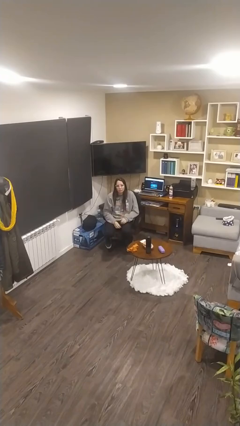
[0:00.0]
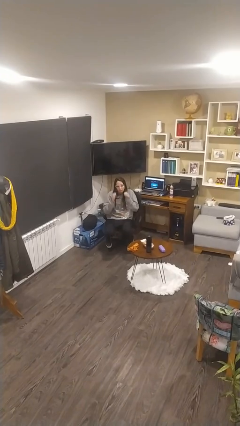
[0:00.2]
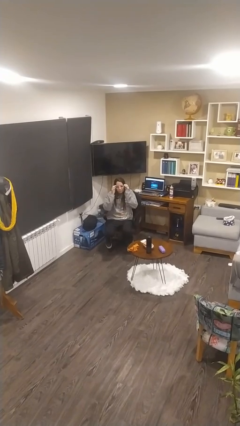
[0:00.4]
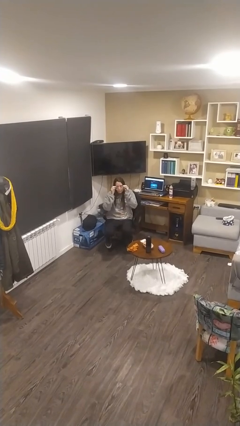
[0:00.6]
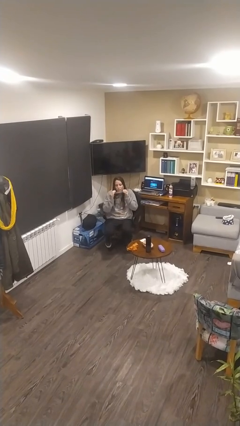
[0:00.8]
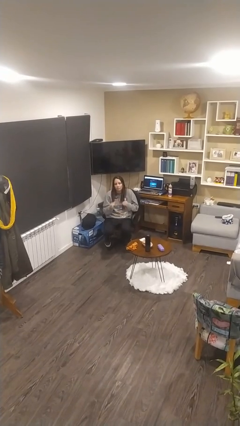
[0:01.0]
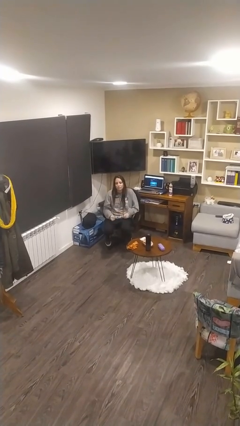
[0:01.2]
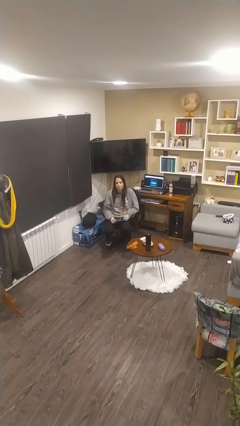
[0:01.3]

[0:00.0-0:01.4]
person takes off glasses

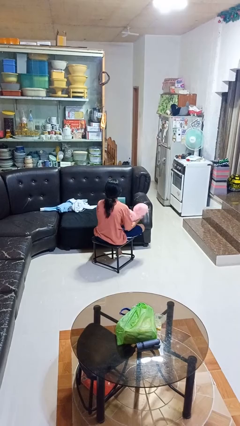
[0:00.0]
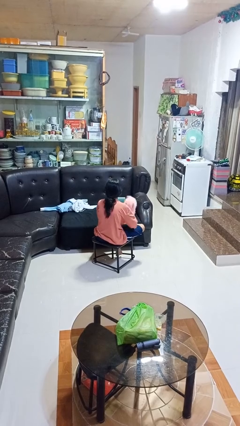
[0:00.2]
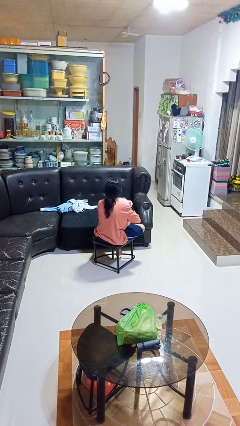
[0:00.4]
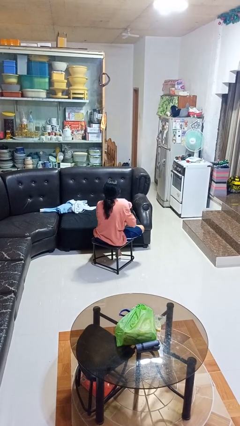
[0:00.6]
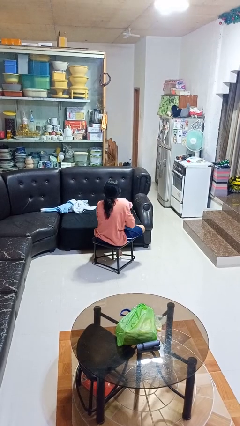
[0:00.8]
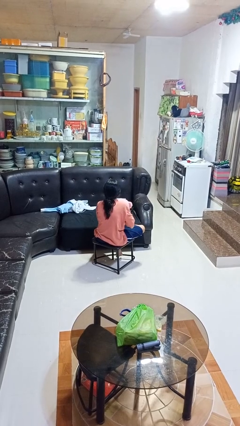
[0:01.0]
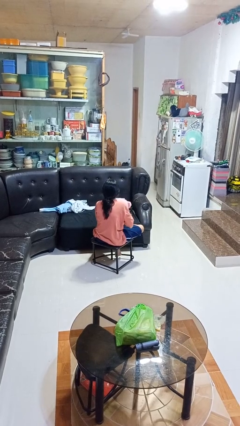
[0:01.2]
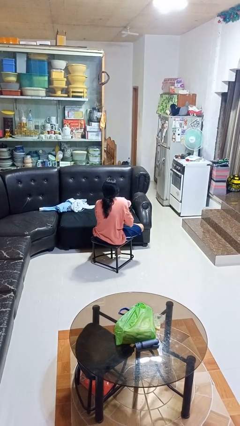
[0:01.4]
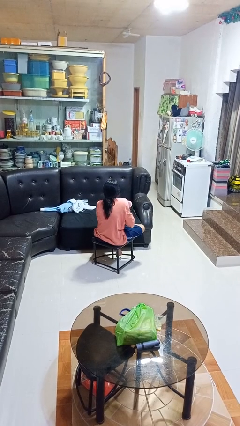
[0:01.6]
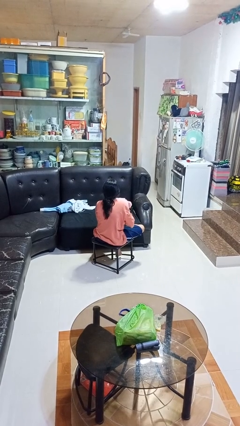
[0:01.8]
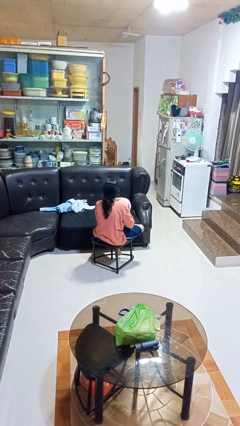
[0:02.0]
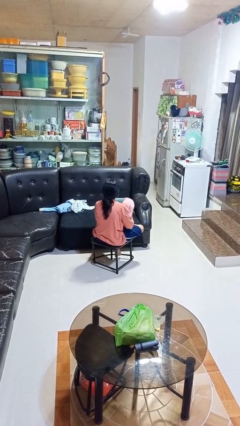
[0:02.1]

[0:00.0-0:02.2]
person hugs stuffed animal

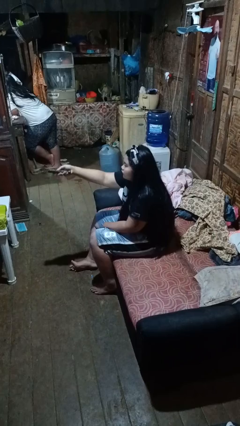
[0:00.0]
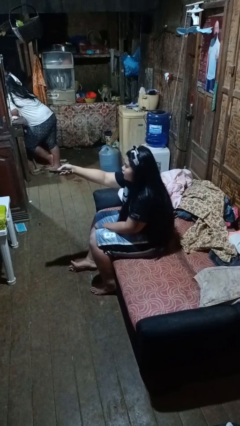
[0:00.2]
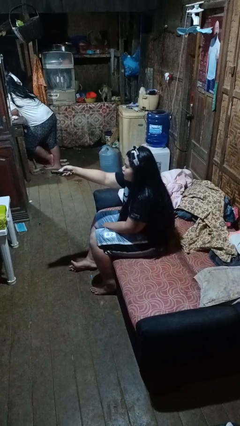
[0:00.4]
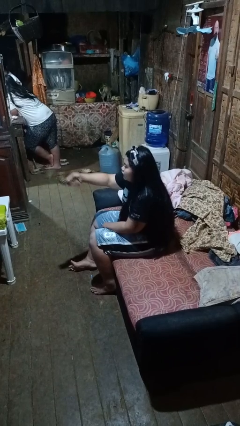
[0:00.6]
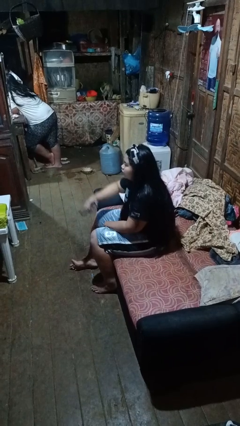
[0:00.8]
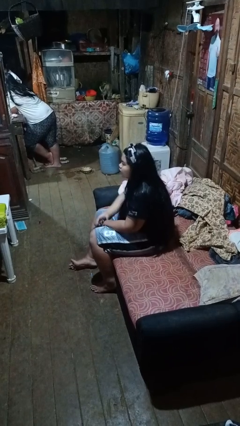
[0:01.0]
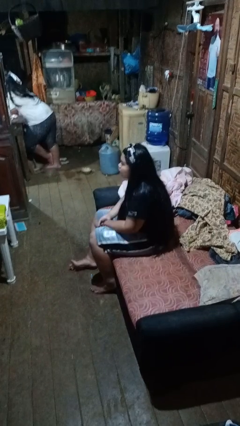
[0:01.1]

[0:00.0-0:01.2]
person uses television remote

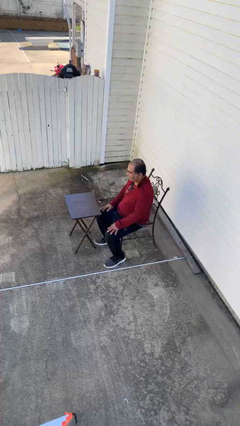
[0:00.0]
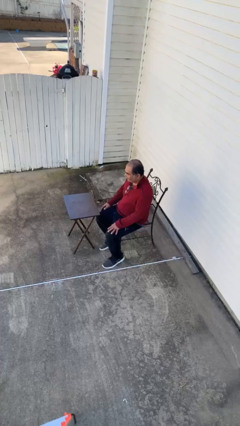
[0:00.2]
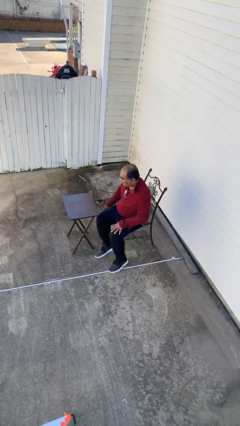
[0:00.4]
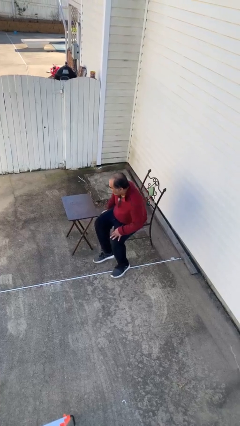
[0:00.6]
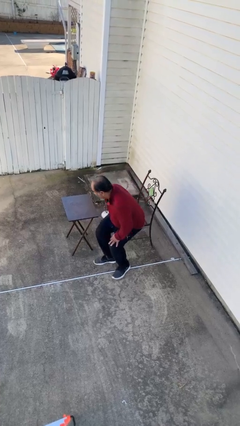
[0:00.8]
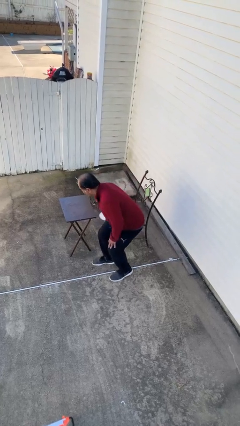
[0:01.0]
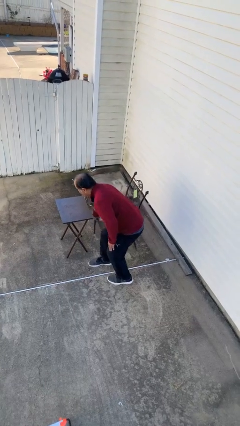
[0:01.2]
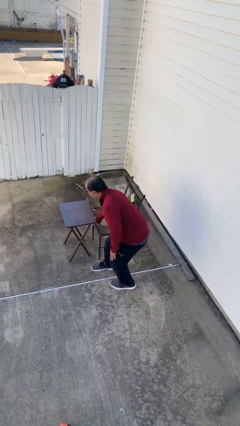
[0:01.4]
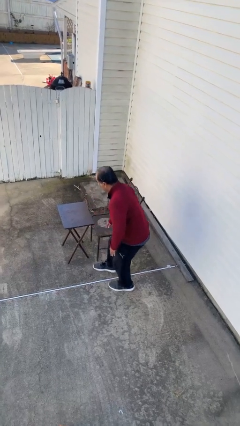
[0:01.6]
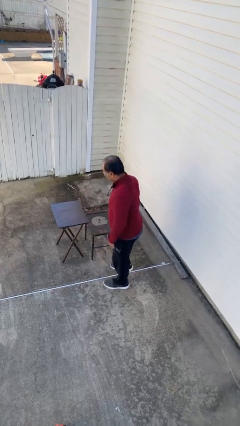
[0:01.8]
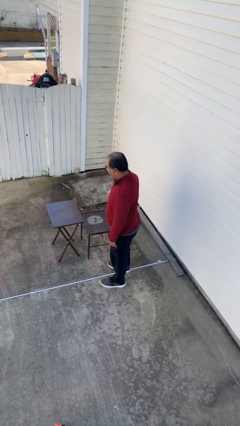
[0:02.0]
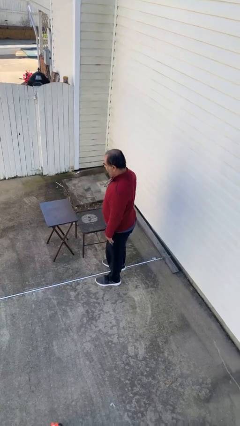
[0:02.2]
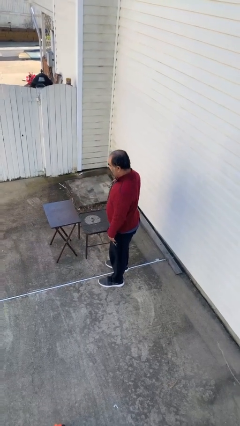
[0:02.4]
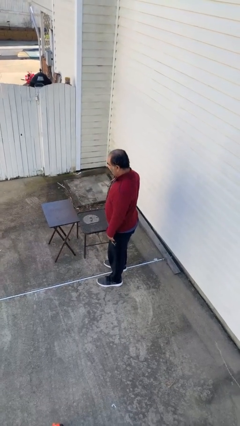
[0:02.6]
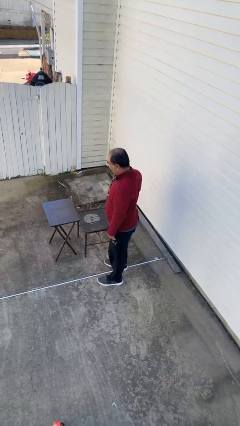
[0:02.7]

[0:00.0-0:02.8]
person stands up

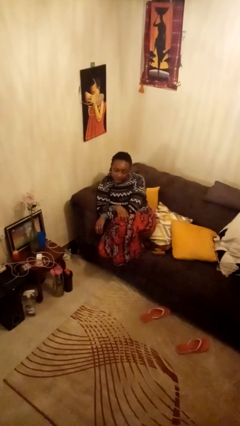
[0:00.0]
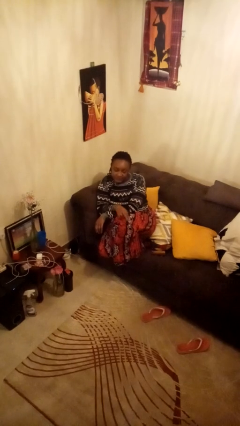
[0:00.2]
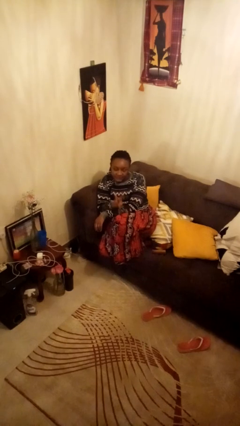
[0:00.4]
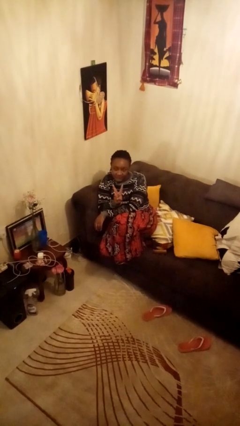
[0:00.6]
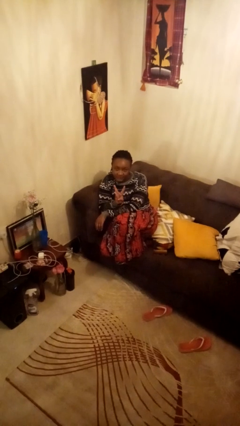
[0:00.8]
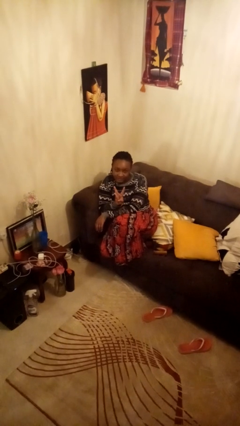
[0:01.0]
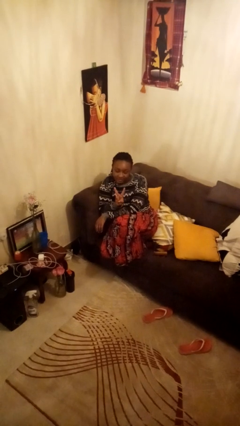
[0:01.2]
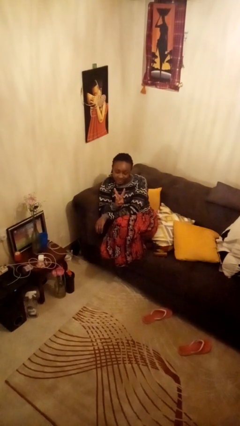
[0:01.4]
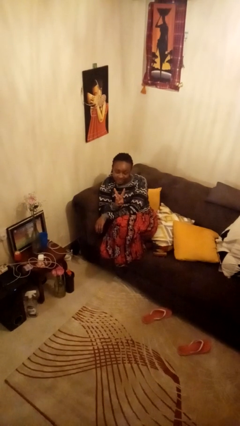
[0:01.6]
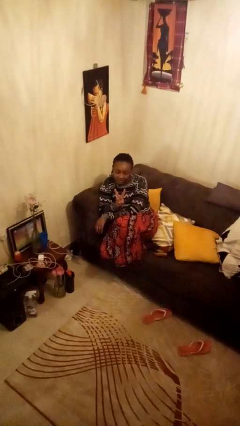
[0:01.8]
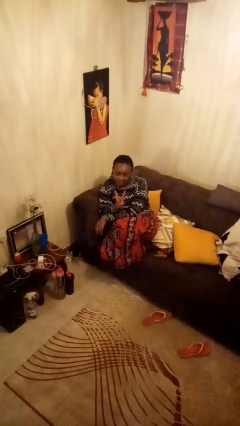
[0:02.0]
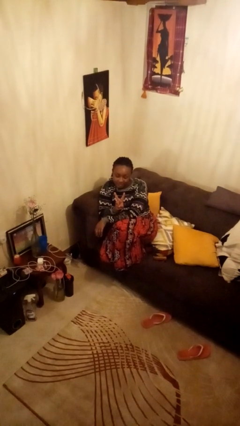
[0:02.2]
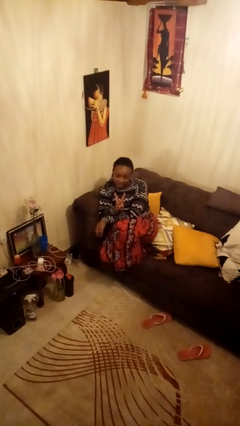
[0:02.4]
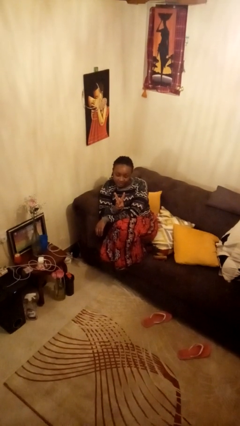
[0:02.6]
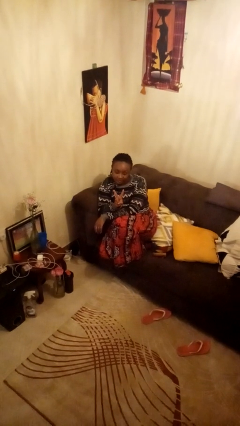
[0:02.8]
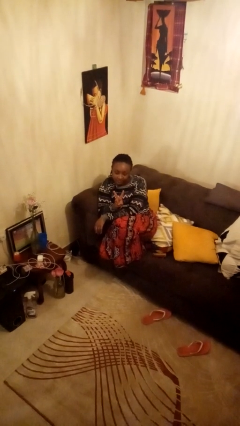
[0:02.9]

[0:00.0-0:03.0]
person gestures peace

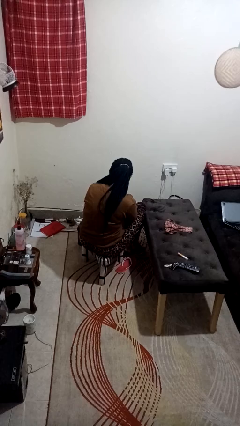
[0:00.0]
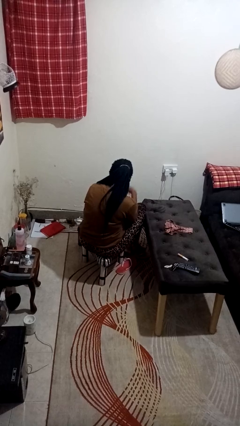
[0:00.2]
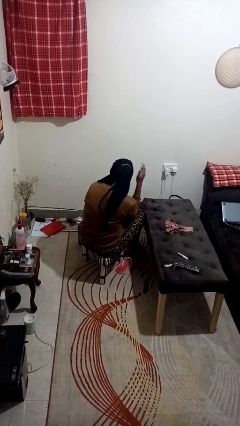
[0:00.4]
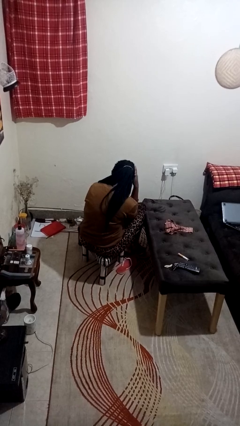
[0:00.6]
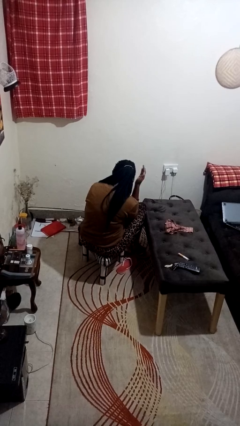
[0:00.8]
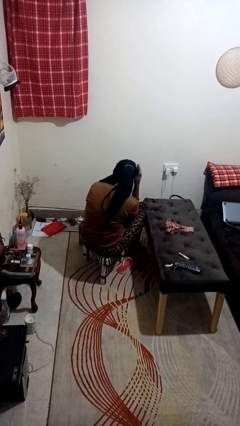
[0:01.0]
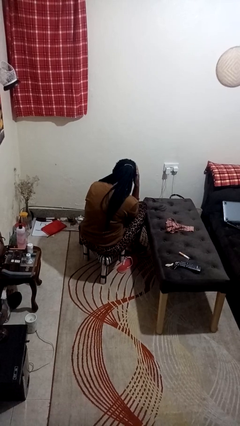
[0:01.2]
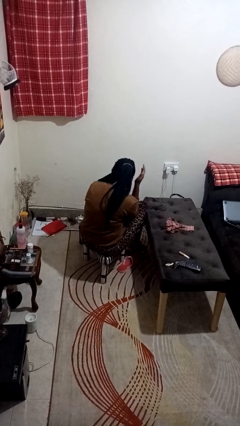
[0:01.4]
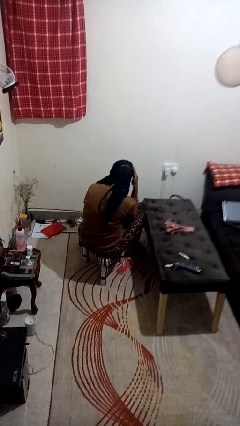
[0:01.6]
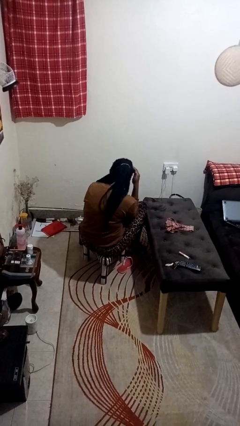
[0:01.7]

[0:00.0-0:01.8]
person pats head

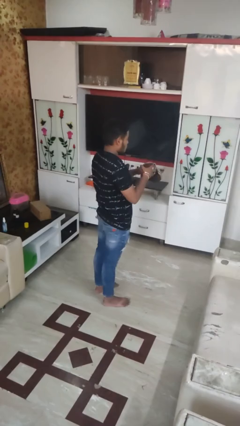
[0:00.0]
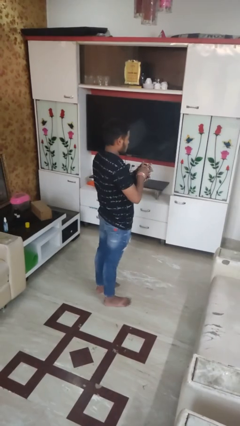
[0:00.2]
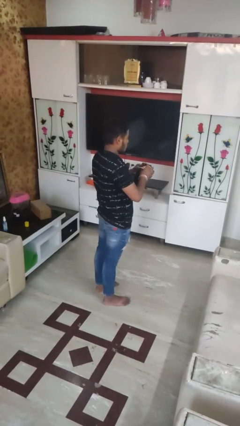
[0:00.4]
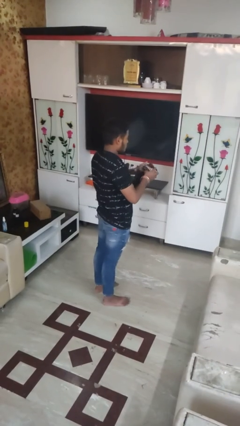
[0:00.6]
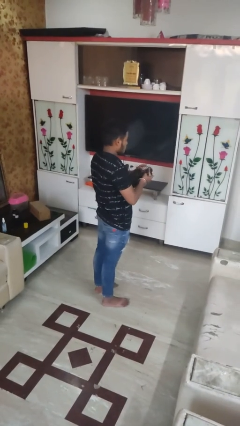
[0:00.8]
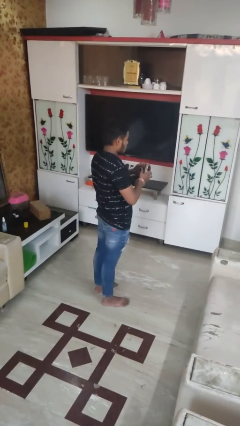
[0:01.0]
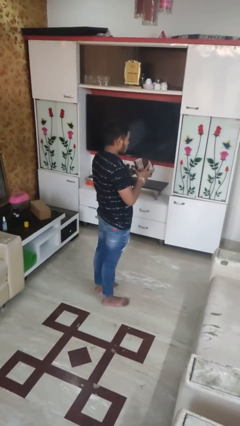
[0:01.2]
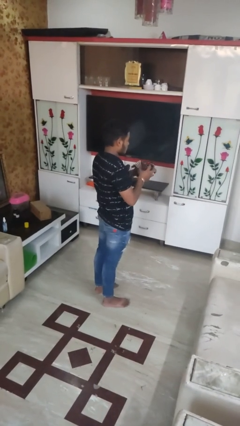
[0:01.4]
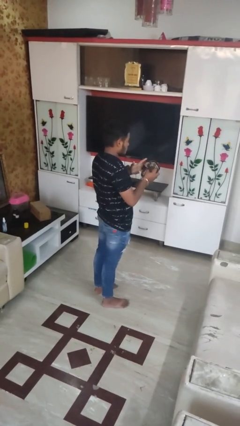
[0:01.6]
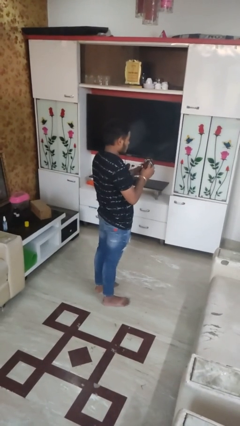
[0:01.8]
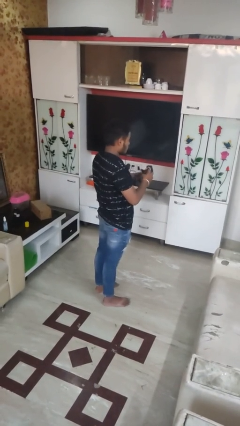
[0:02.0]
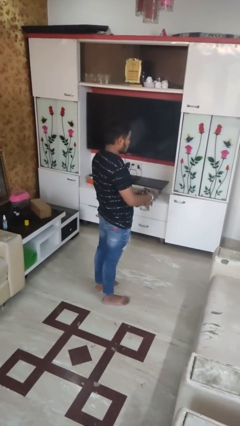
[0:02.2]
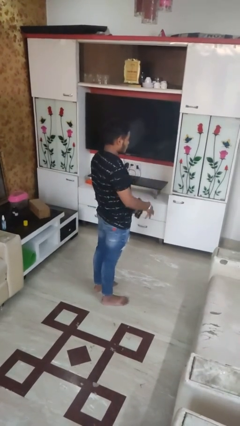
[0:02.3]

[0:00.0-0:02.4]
person squeezes object

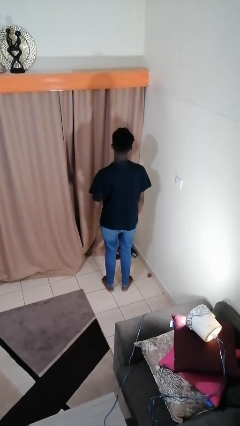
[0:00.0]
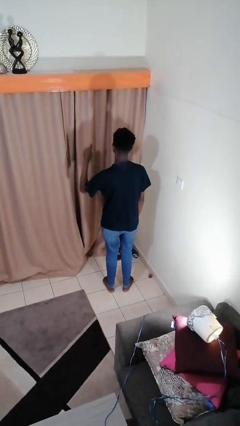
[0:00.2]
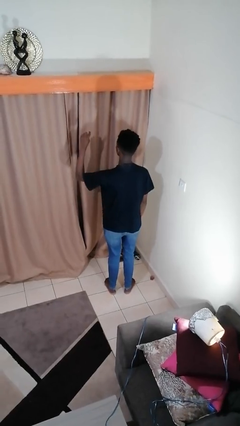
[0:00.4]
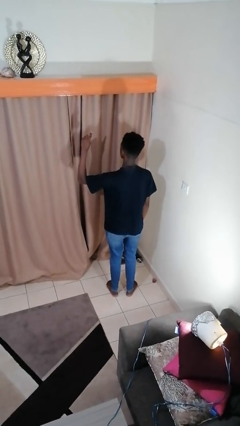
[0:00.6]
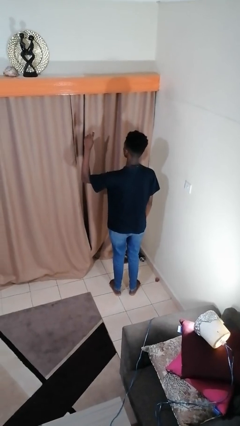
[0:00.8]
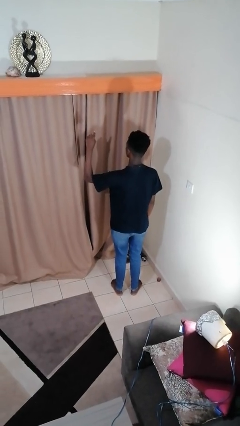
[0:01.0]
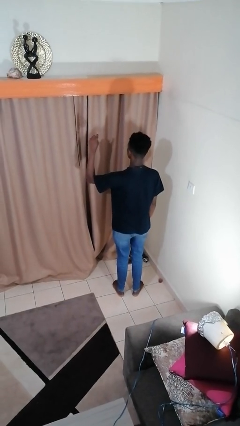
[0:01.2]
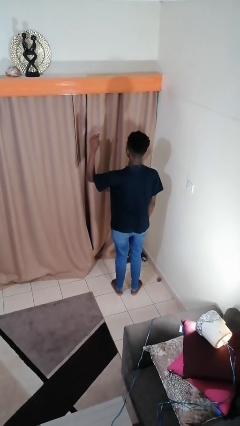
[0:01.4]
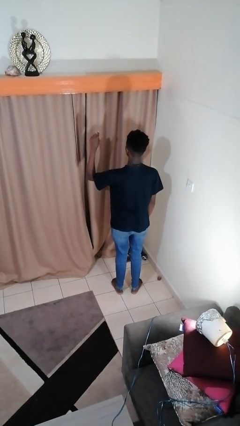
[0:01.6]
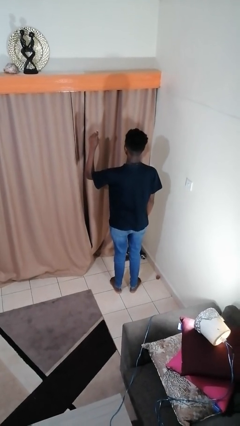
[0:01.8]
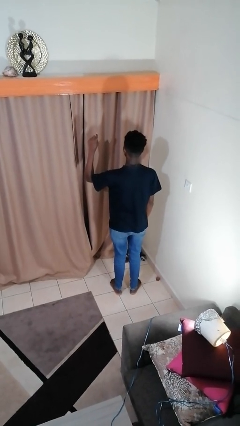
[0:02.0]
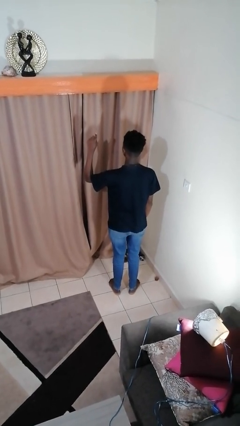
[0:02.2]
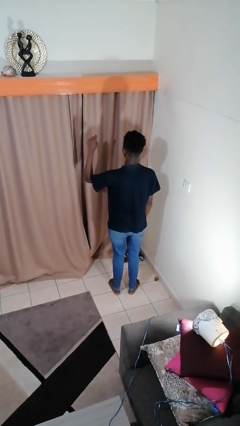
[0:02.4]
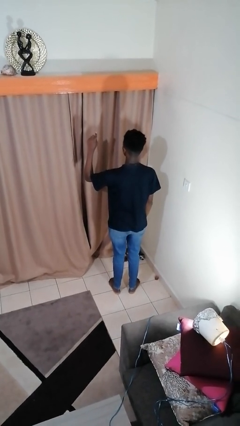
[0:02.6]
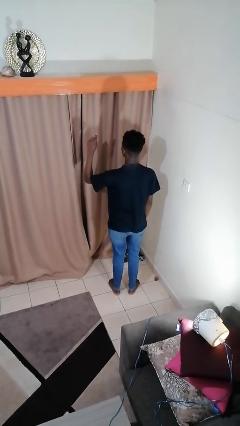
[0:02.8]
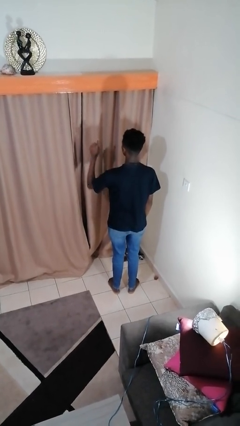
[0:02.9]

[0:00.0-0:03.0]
person gestures number one
